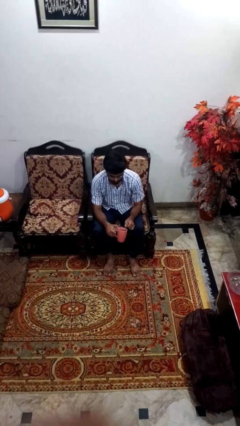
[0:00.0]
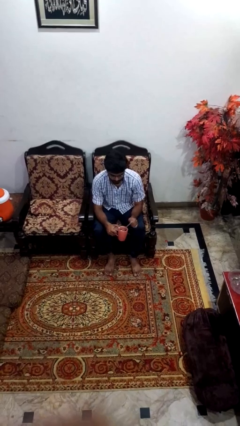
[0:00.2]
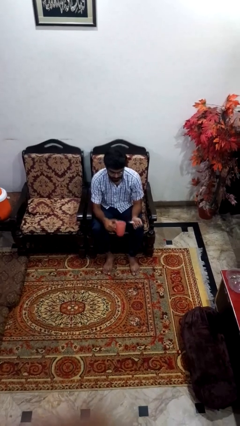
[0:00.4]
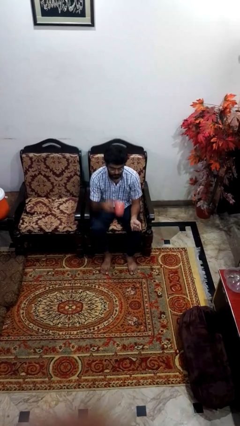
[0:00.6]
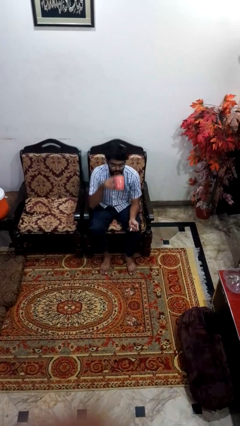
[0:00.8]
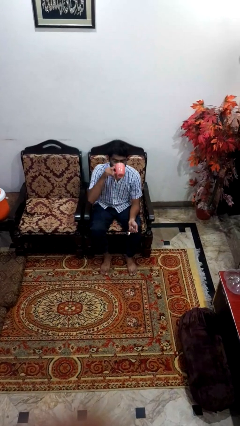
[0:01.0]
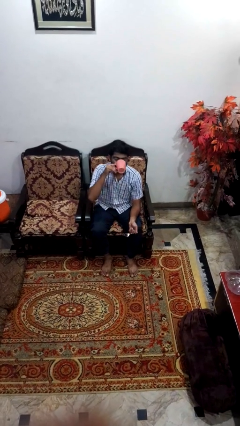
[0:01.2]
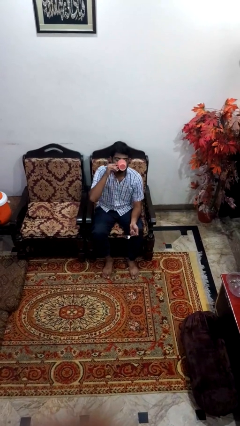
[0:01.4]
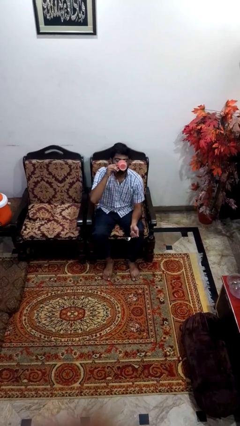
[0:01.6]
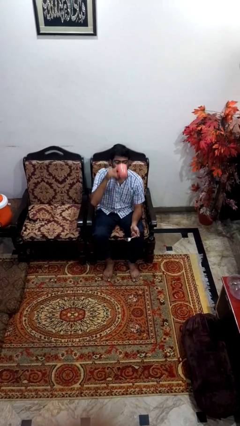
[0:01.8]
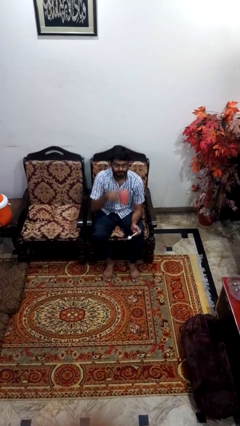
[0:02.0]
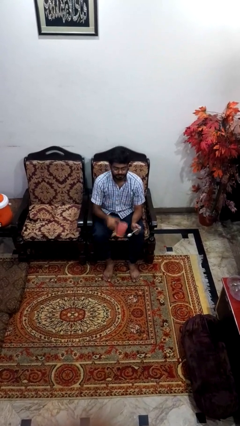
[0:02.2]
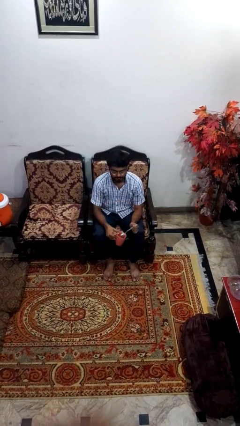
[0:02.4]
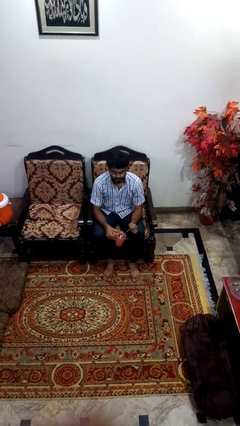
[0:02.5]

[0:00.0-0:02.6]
person drinks from mug

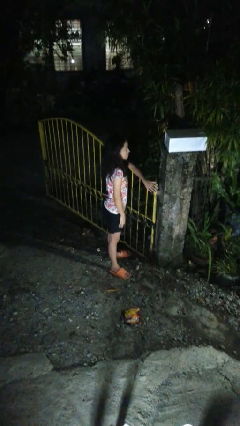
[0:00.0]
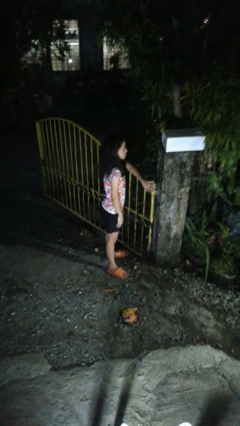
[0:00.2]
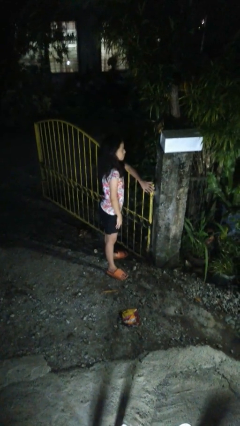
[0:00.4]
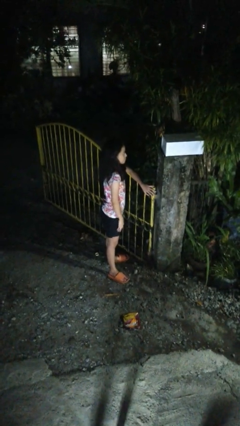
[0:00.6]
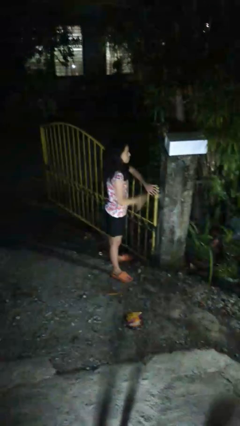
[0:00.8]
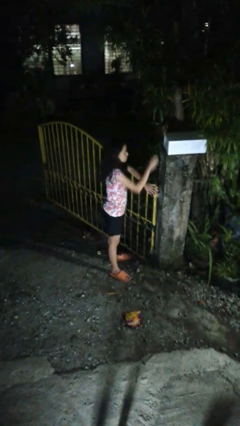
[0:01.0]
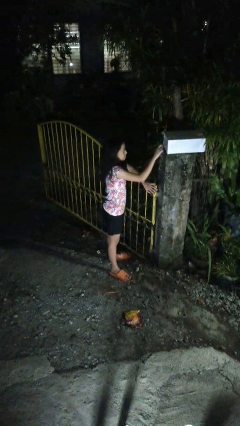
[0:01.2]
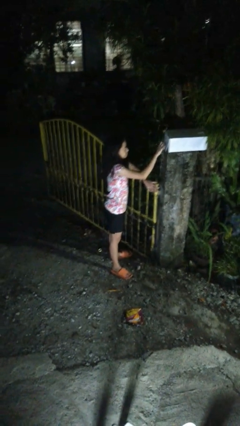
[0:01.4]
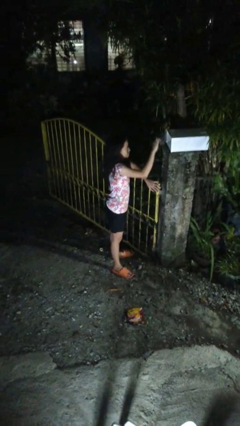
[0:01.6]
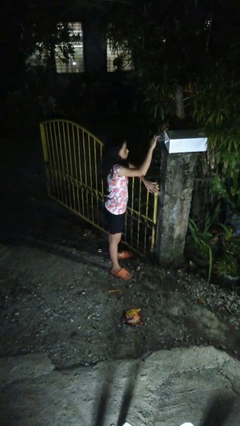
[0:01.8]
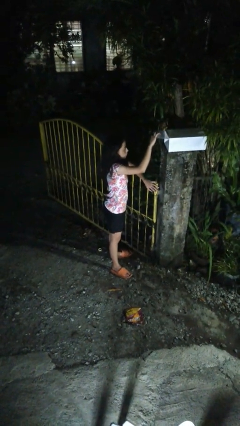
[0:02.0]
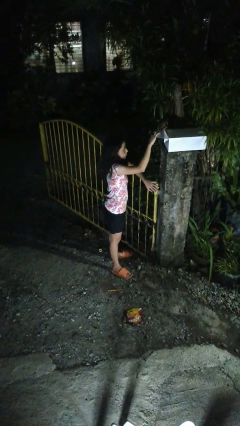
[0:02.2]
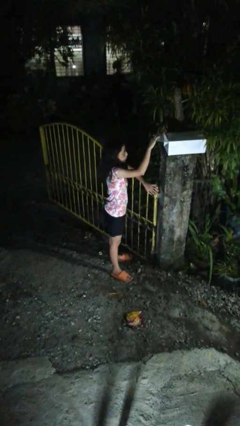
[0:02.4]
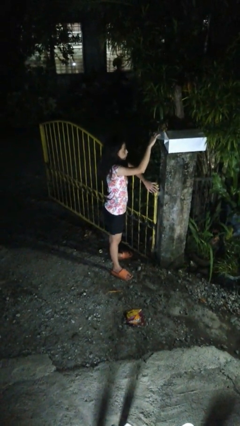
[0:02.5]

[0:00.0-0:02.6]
person opens mailbox

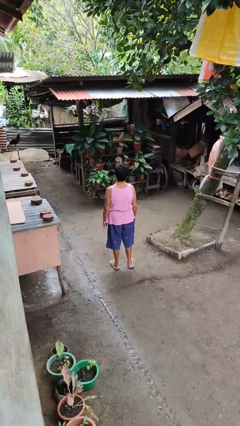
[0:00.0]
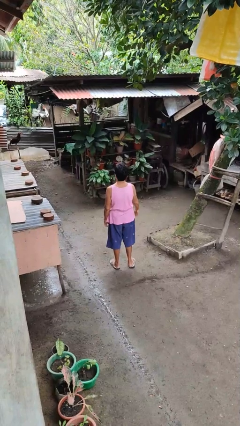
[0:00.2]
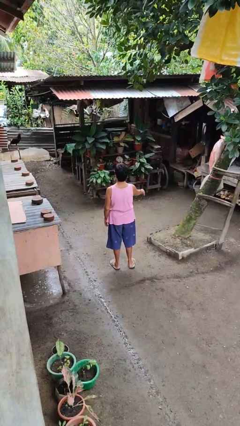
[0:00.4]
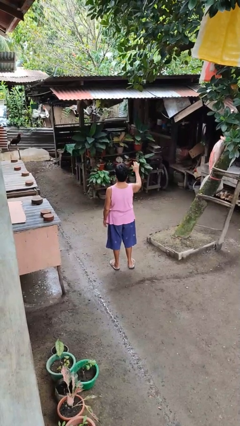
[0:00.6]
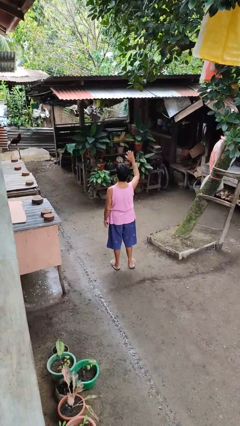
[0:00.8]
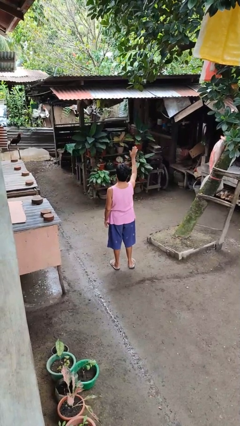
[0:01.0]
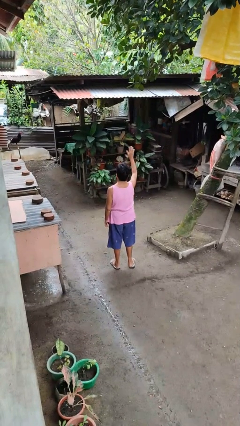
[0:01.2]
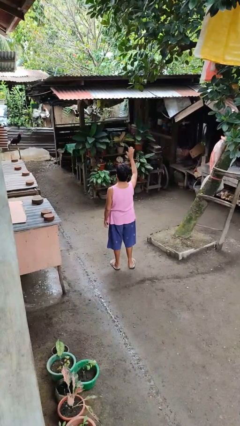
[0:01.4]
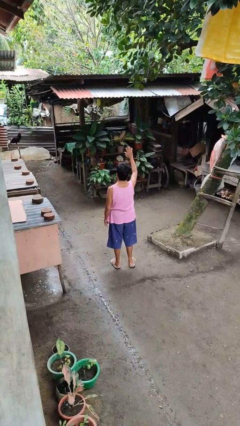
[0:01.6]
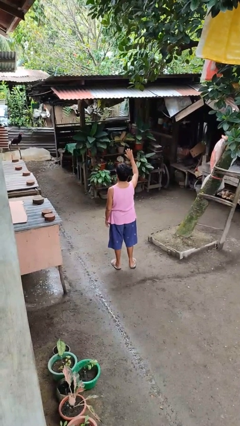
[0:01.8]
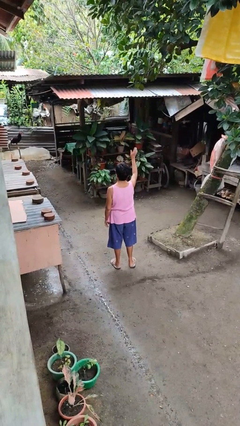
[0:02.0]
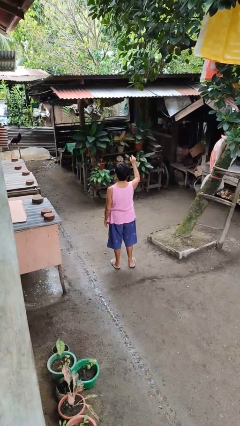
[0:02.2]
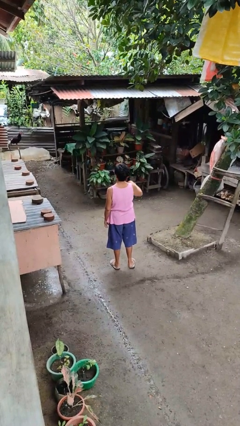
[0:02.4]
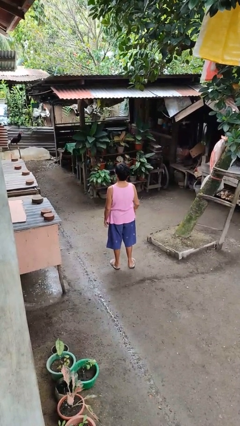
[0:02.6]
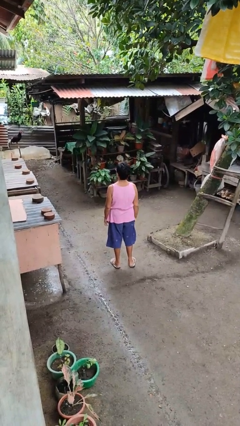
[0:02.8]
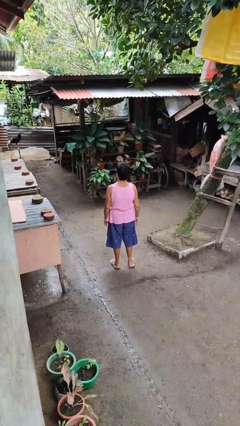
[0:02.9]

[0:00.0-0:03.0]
person waves at person

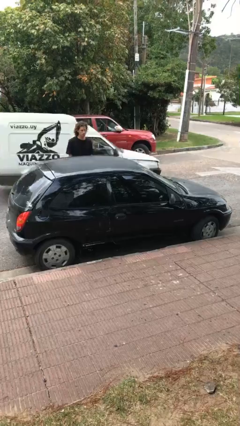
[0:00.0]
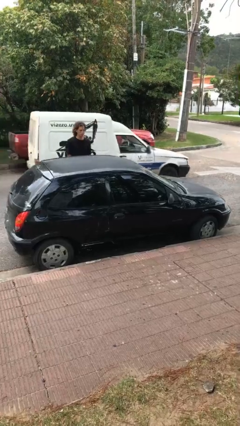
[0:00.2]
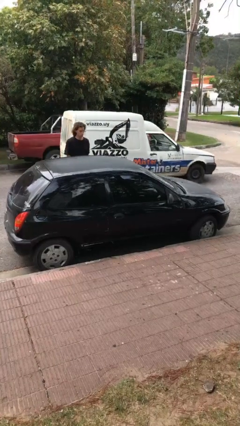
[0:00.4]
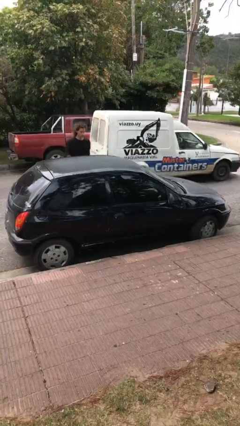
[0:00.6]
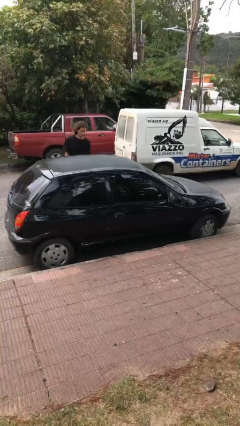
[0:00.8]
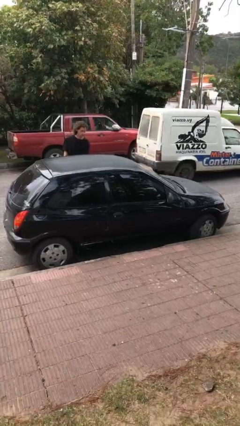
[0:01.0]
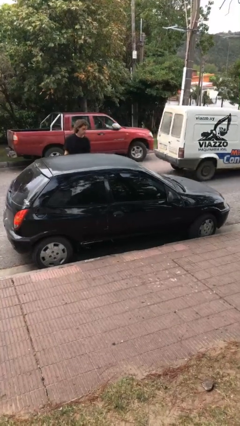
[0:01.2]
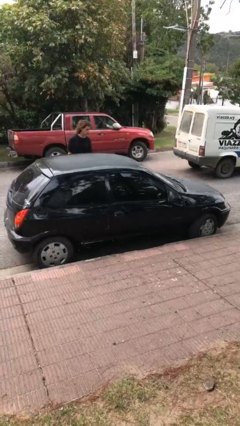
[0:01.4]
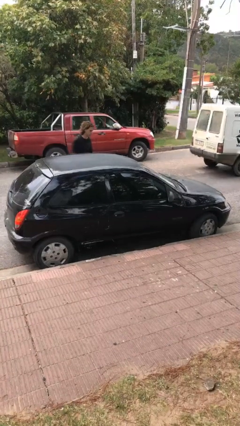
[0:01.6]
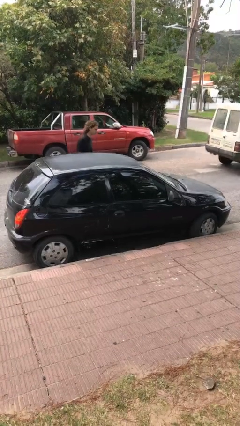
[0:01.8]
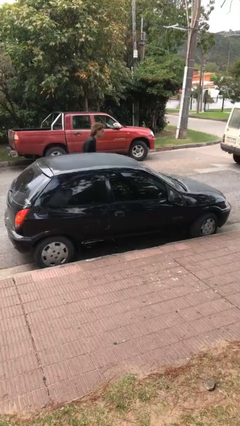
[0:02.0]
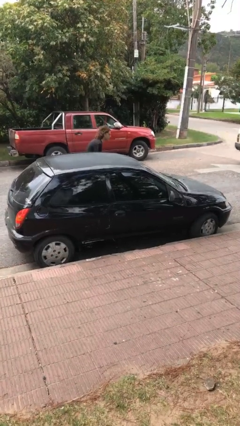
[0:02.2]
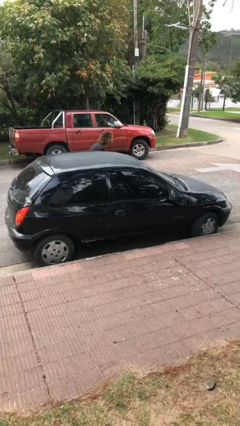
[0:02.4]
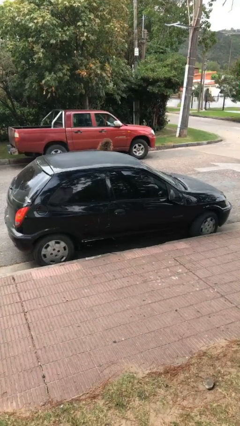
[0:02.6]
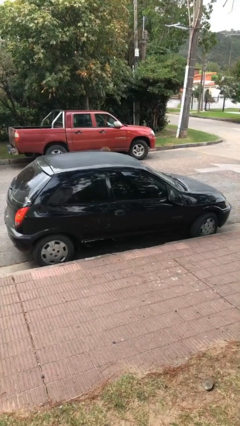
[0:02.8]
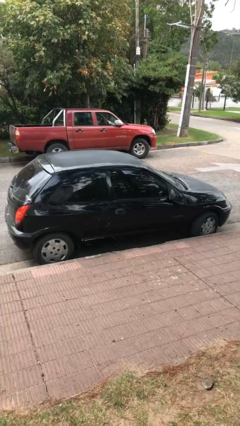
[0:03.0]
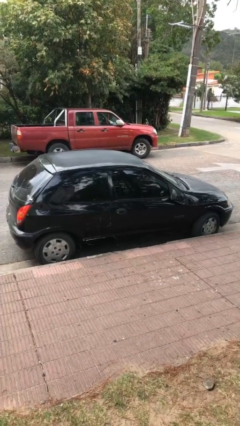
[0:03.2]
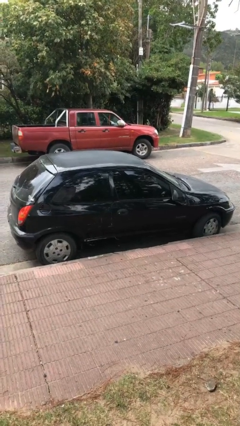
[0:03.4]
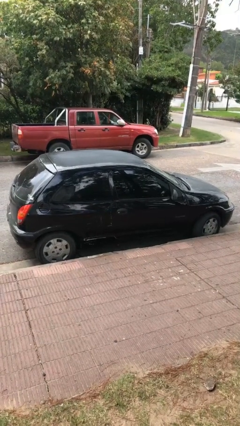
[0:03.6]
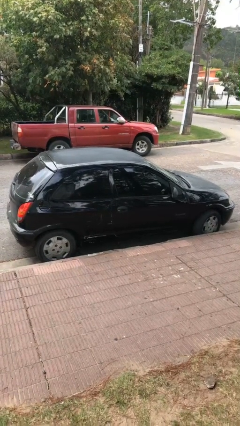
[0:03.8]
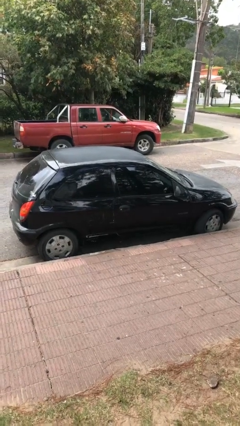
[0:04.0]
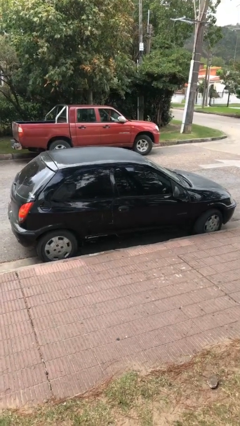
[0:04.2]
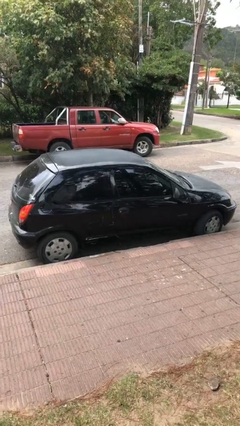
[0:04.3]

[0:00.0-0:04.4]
car picks up person

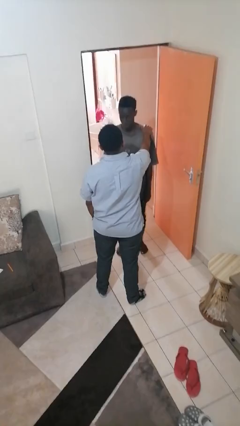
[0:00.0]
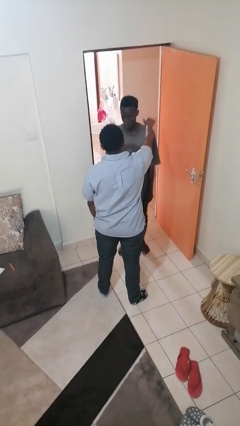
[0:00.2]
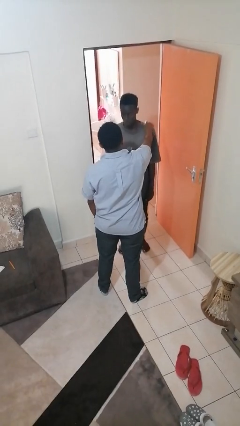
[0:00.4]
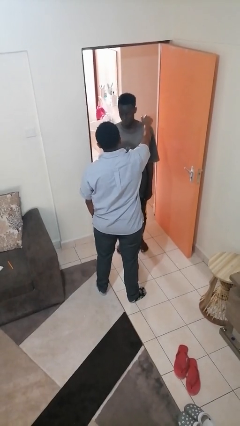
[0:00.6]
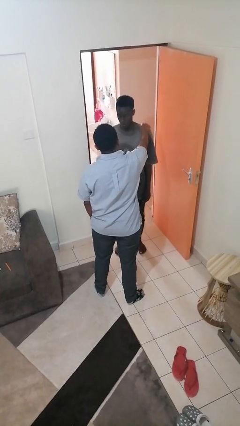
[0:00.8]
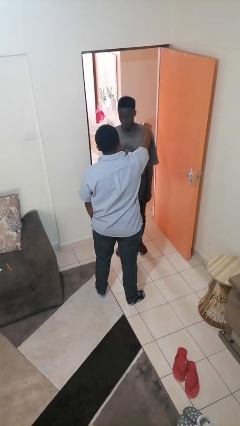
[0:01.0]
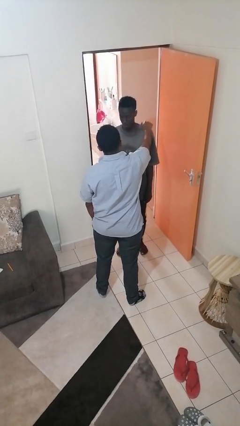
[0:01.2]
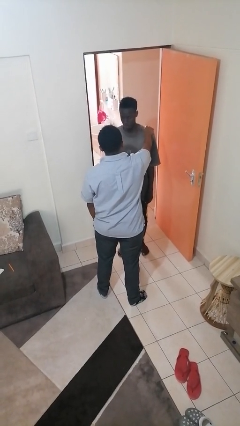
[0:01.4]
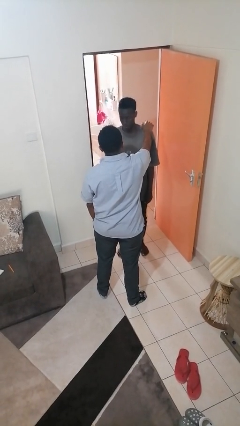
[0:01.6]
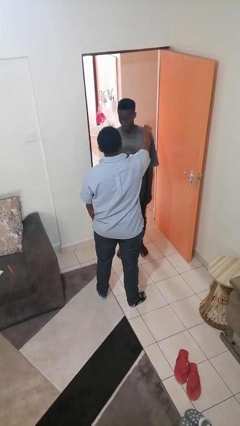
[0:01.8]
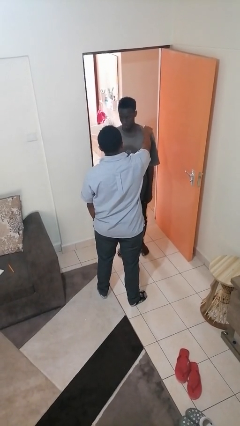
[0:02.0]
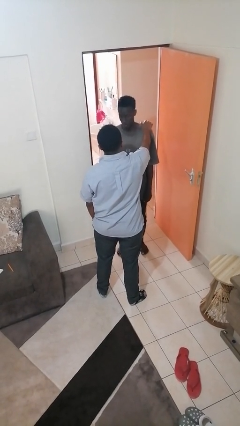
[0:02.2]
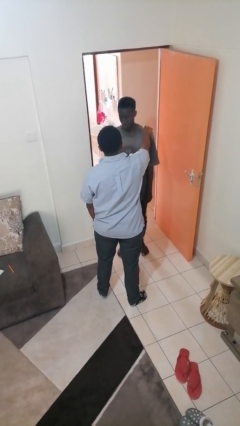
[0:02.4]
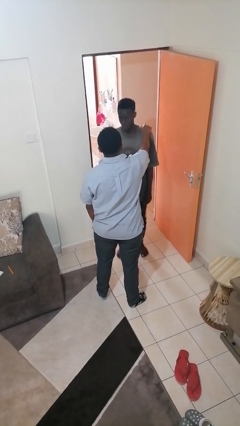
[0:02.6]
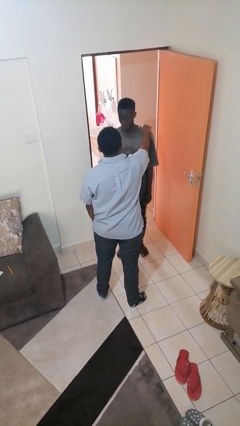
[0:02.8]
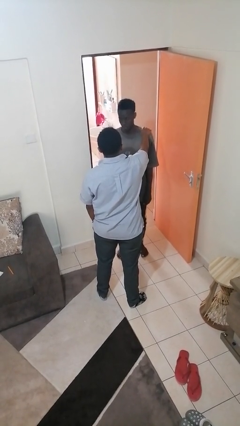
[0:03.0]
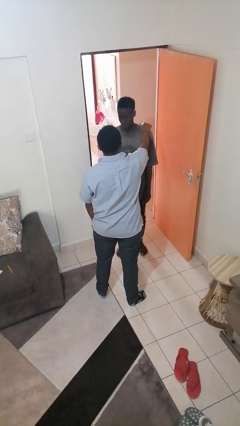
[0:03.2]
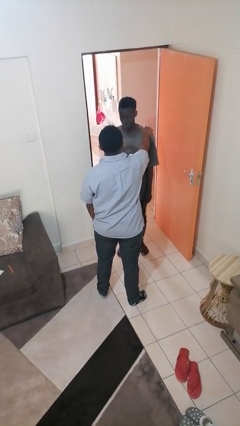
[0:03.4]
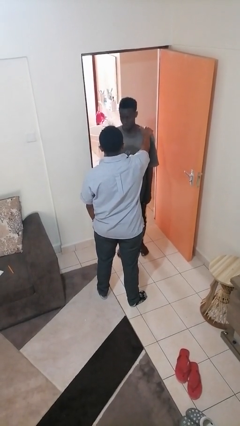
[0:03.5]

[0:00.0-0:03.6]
person pounds shoulders of person

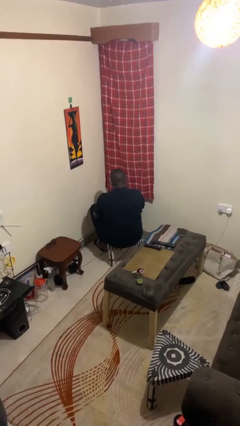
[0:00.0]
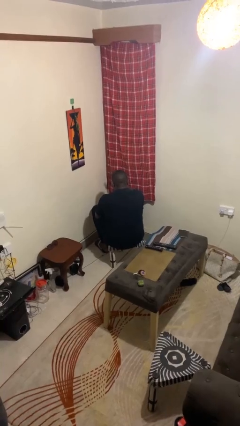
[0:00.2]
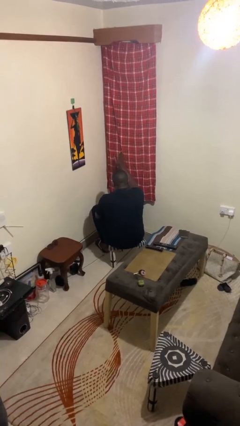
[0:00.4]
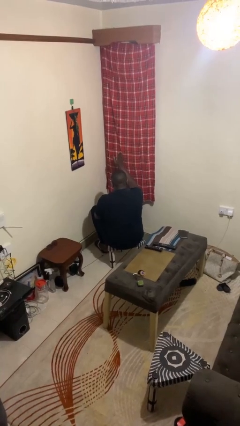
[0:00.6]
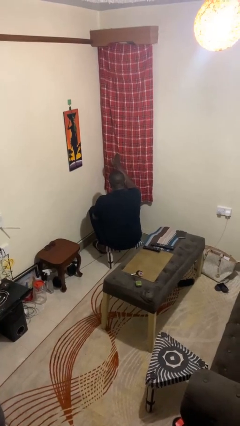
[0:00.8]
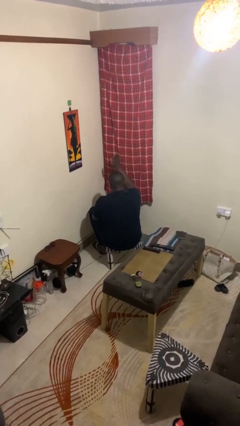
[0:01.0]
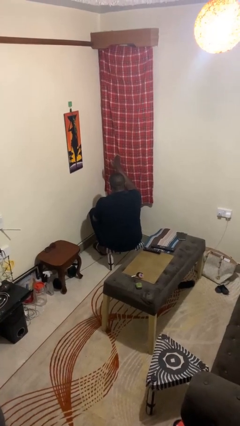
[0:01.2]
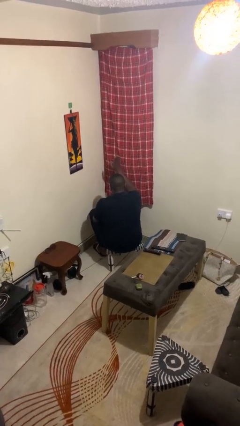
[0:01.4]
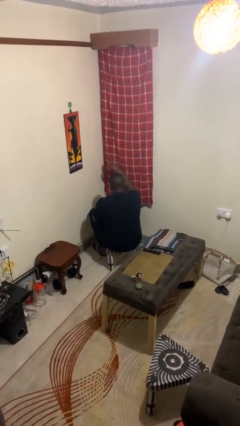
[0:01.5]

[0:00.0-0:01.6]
person gestures swipe up

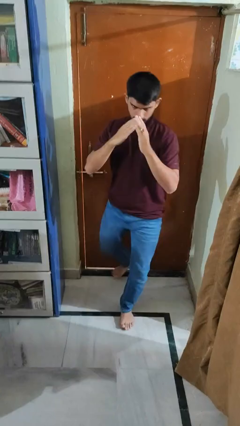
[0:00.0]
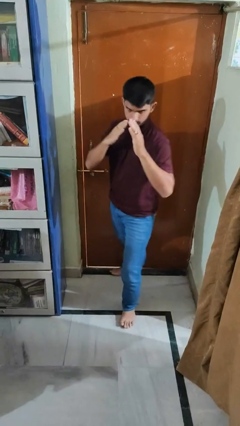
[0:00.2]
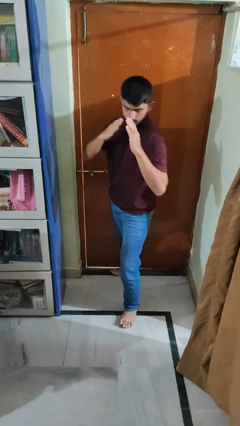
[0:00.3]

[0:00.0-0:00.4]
person karate chop
